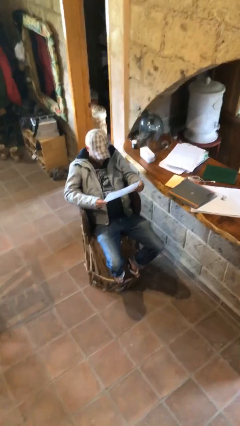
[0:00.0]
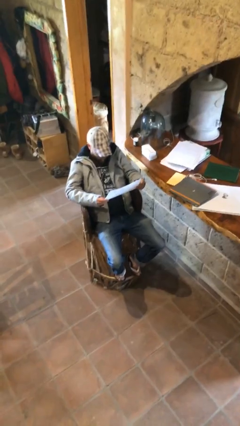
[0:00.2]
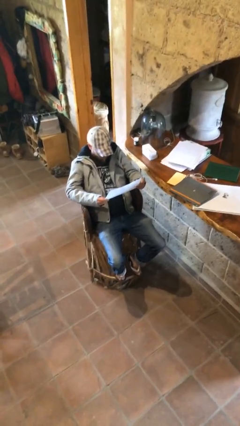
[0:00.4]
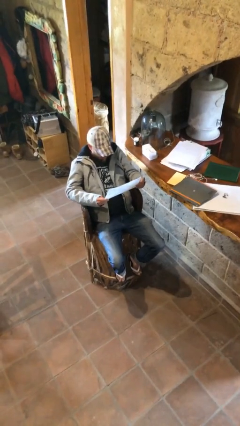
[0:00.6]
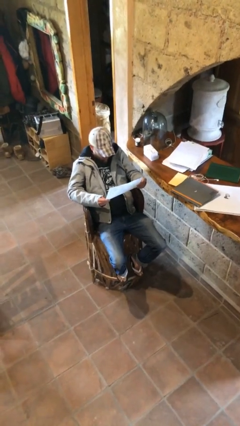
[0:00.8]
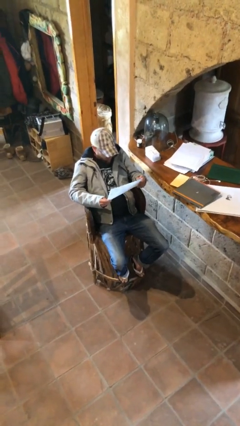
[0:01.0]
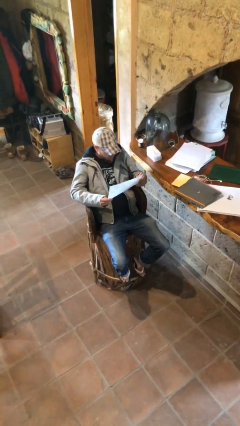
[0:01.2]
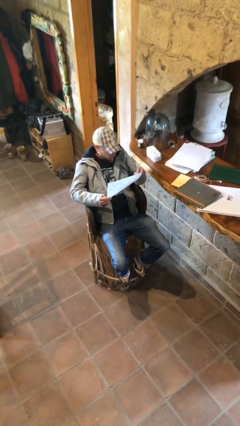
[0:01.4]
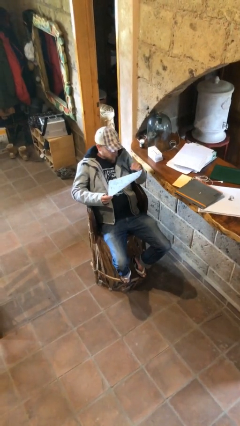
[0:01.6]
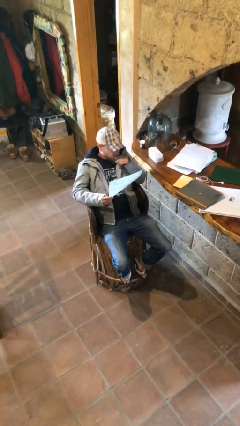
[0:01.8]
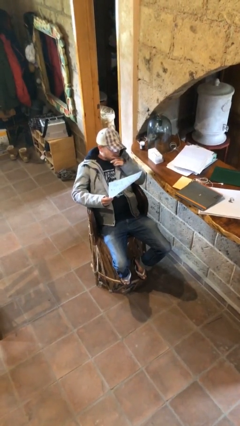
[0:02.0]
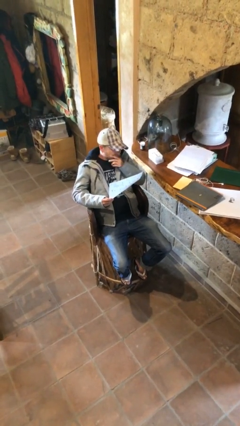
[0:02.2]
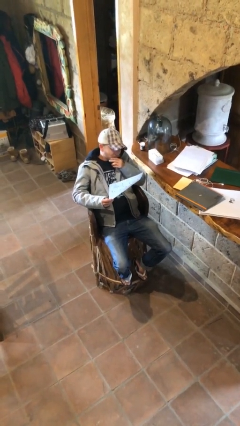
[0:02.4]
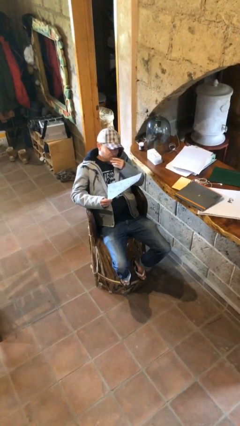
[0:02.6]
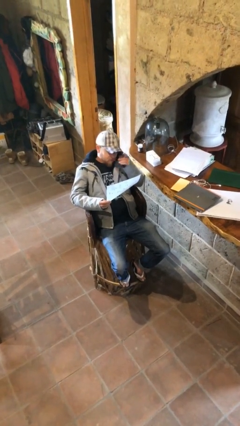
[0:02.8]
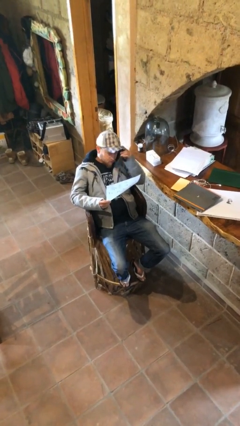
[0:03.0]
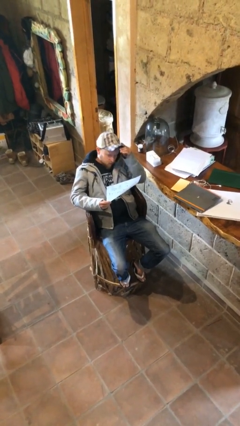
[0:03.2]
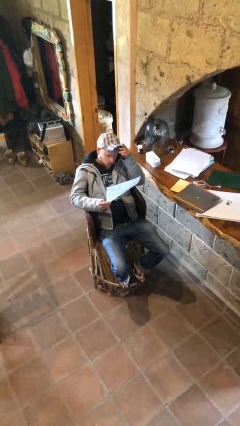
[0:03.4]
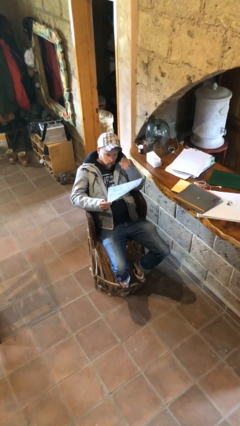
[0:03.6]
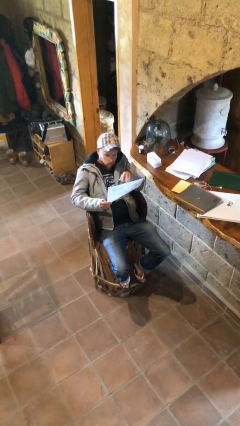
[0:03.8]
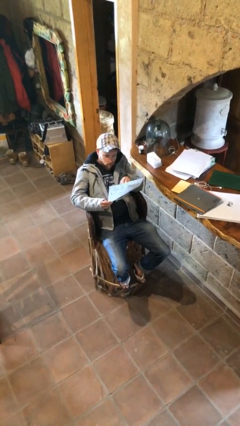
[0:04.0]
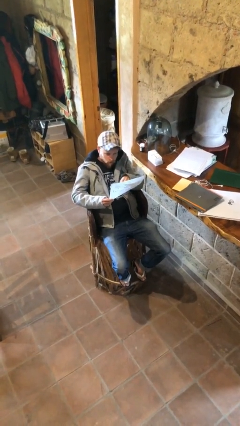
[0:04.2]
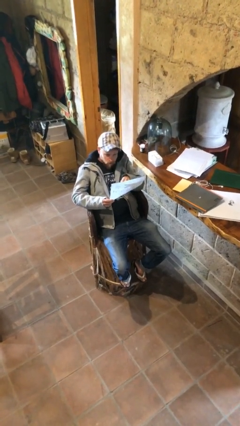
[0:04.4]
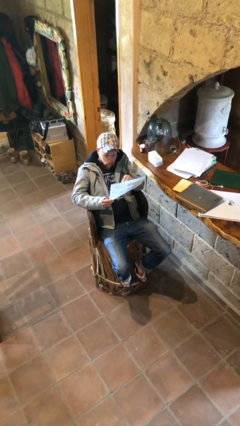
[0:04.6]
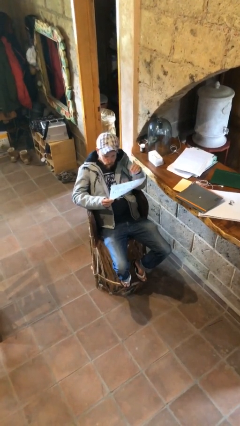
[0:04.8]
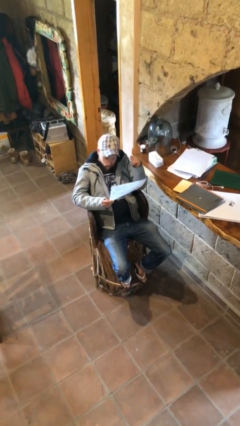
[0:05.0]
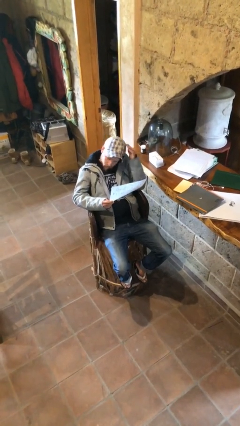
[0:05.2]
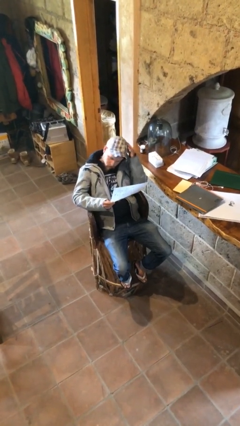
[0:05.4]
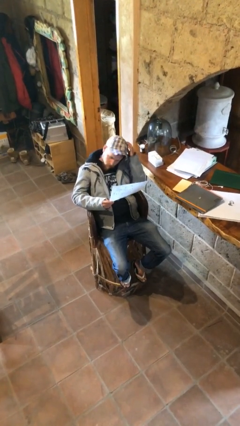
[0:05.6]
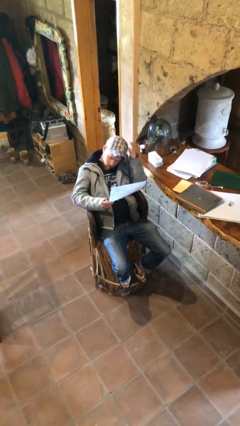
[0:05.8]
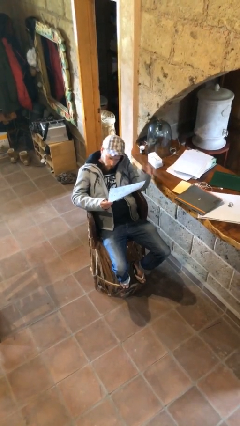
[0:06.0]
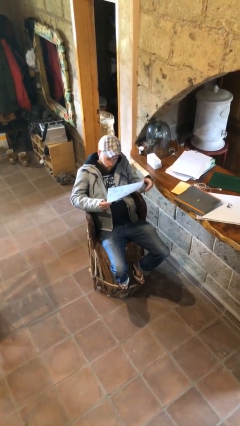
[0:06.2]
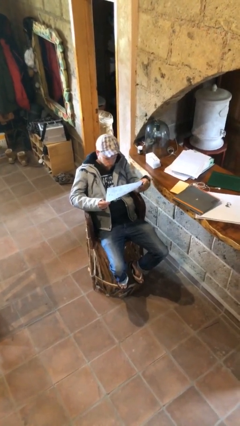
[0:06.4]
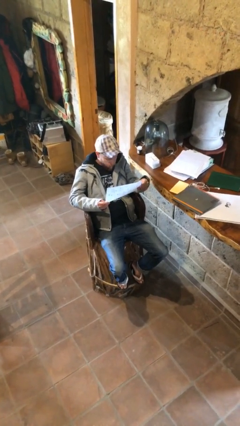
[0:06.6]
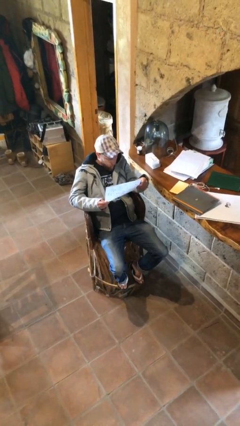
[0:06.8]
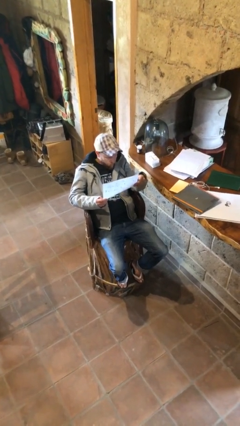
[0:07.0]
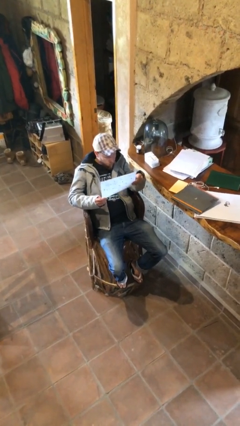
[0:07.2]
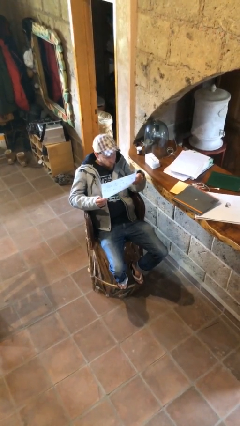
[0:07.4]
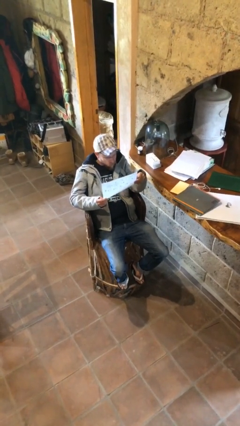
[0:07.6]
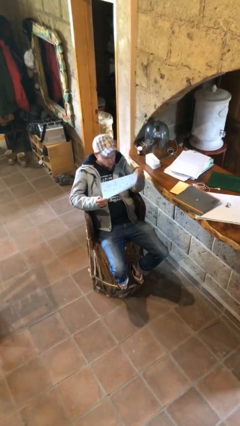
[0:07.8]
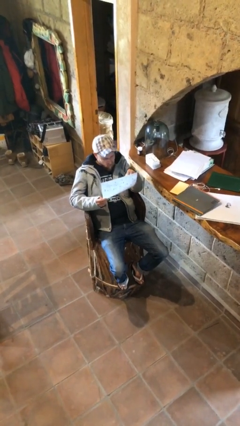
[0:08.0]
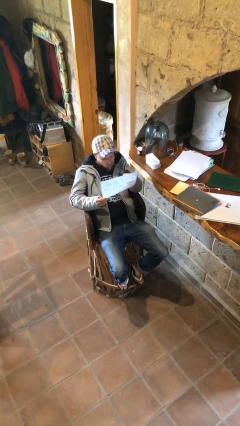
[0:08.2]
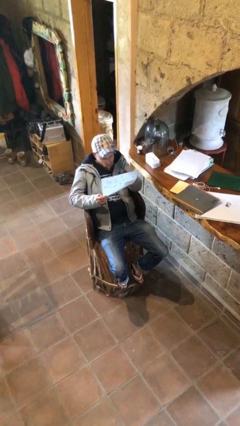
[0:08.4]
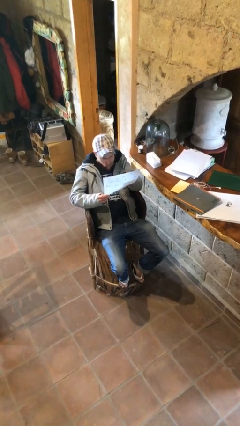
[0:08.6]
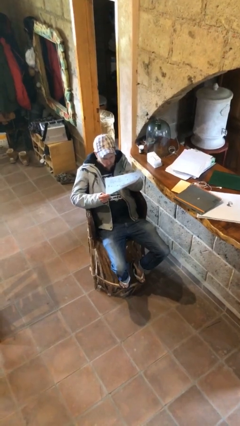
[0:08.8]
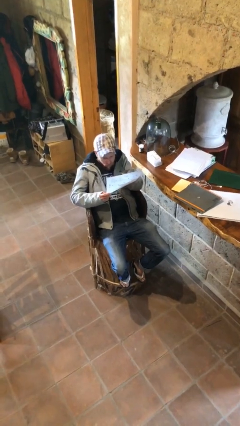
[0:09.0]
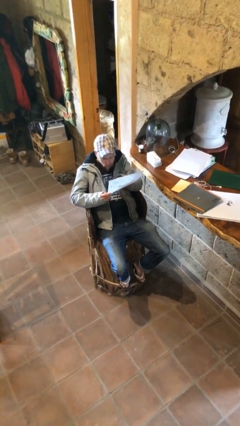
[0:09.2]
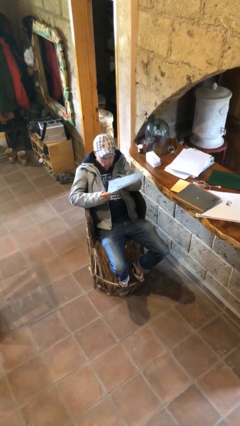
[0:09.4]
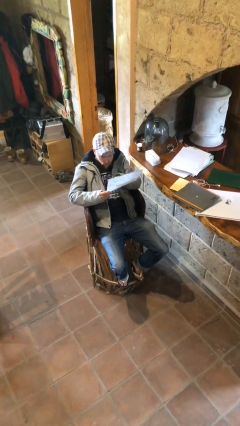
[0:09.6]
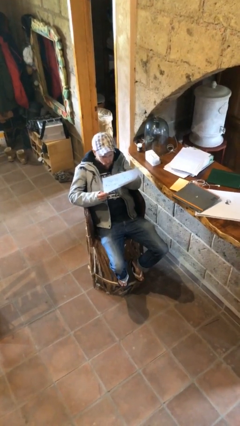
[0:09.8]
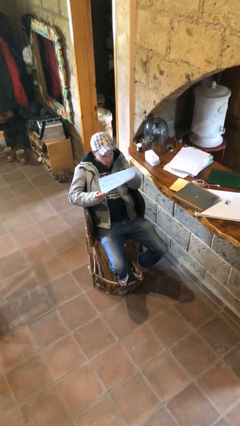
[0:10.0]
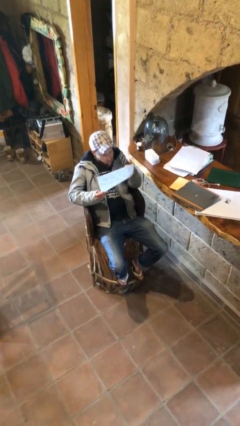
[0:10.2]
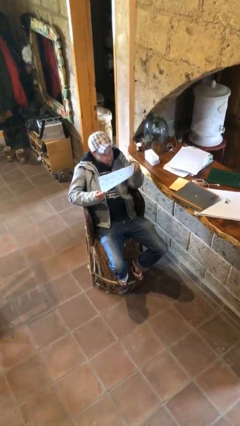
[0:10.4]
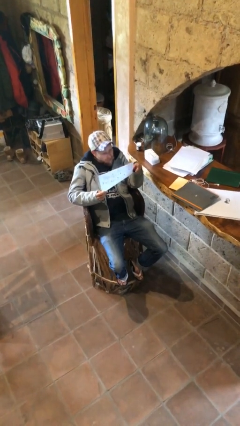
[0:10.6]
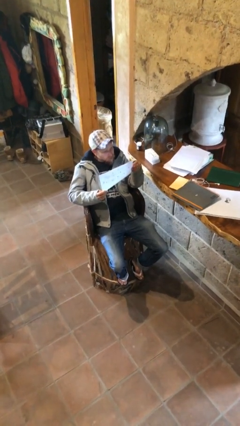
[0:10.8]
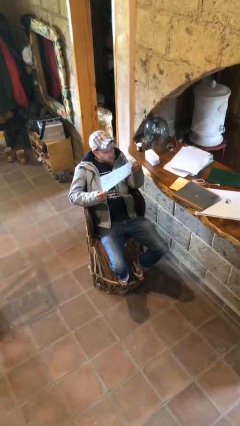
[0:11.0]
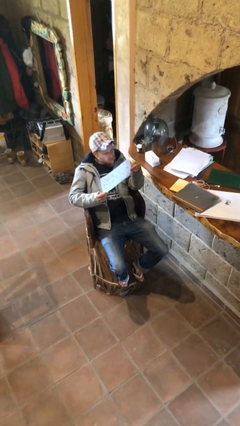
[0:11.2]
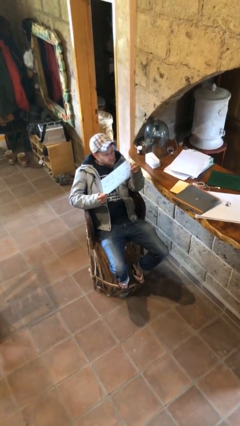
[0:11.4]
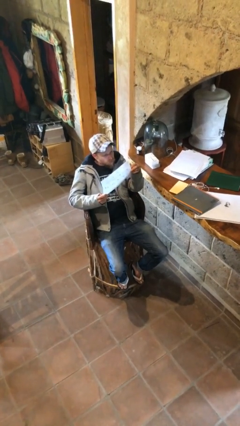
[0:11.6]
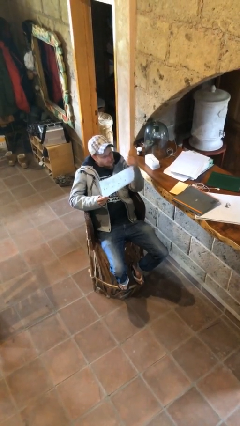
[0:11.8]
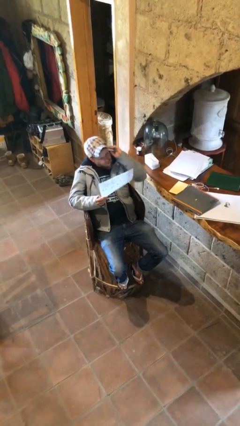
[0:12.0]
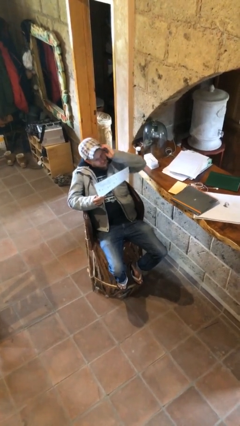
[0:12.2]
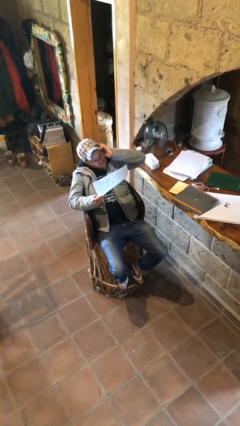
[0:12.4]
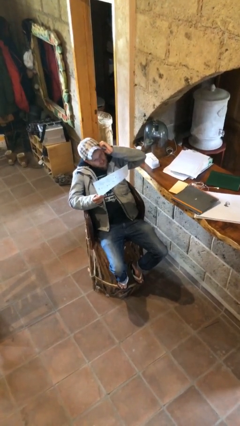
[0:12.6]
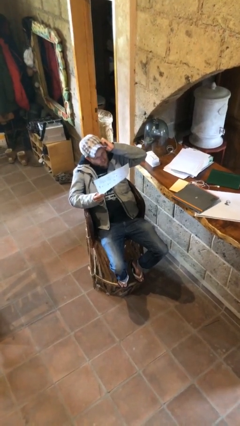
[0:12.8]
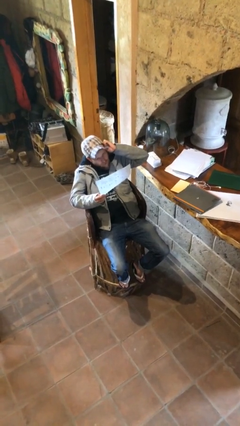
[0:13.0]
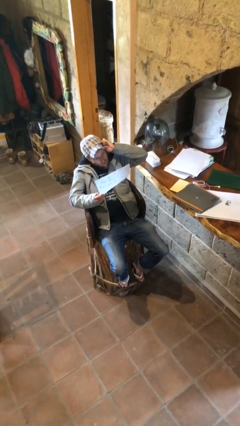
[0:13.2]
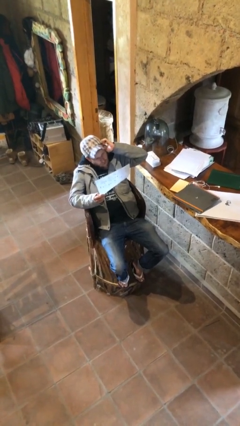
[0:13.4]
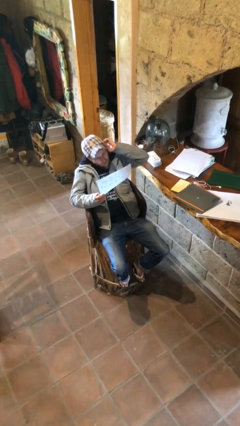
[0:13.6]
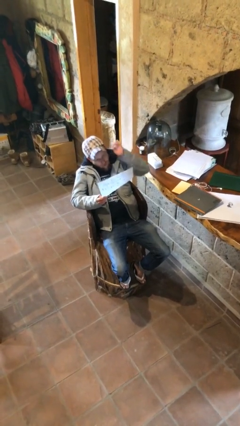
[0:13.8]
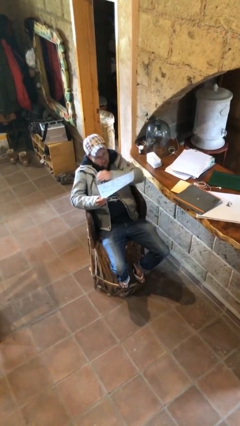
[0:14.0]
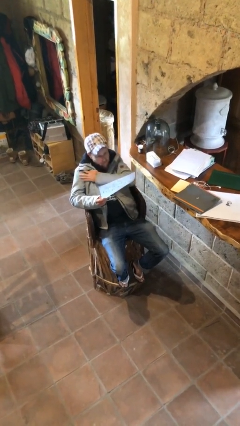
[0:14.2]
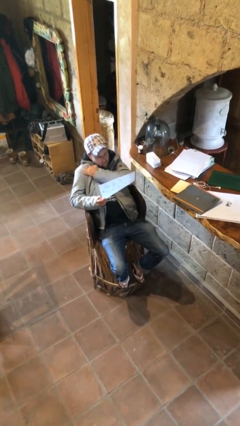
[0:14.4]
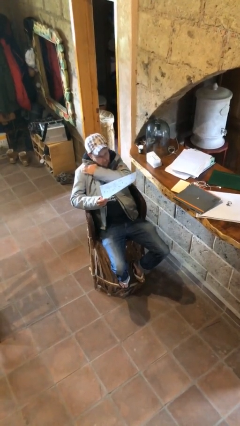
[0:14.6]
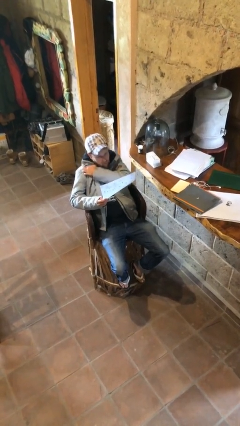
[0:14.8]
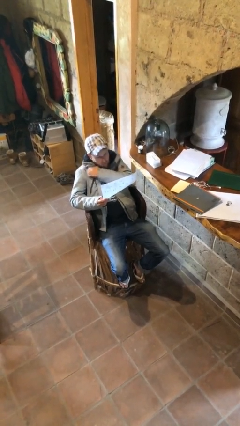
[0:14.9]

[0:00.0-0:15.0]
person reads document

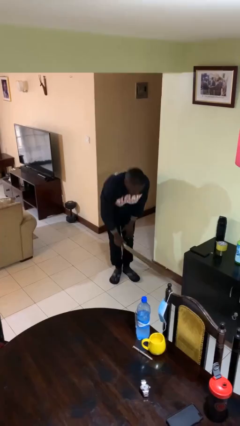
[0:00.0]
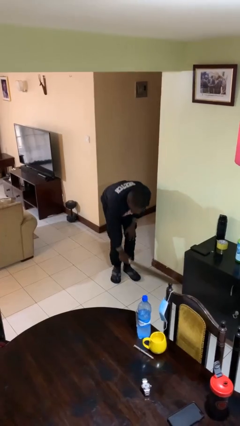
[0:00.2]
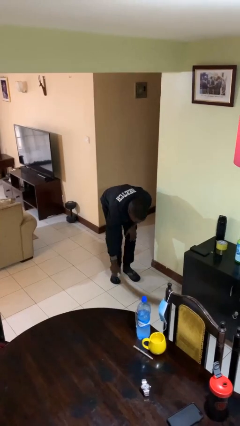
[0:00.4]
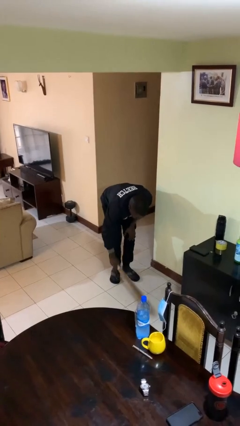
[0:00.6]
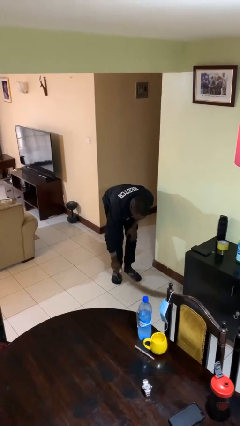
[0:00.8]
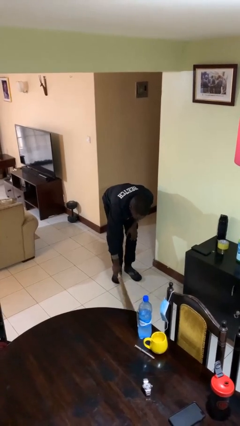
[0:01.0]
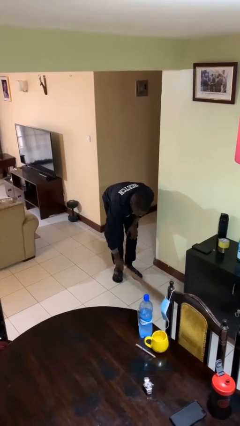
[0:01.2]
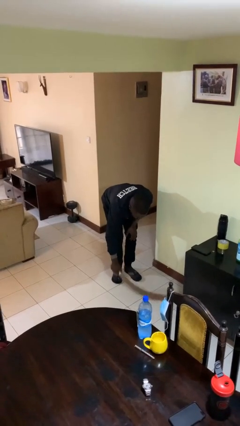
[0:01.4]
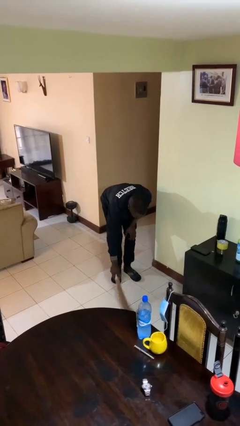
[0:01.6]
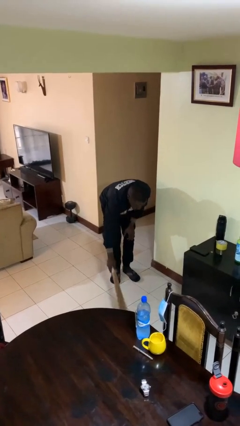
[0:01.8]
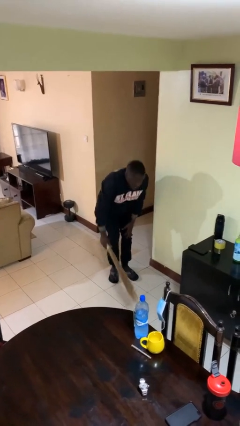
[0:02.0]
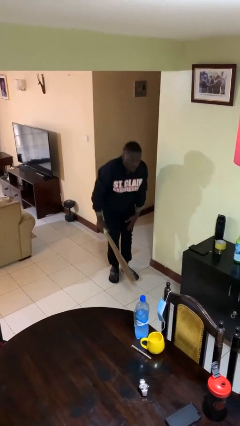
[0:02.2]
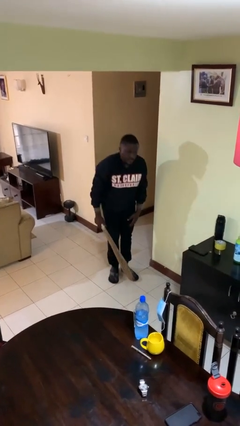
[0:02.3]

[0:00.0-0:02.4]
person sweeps floor

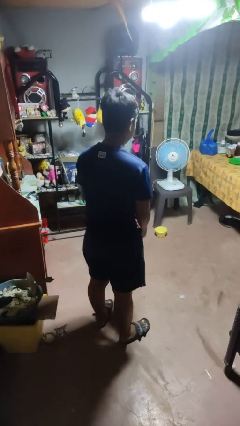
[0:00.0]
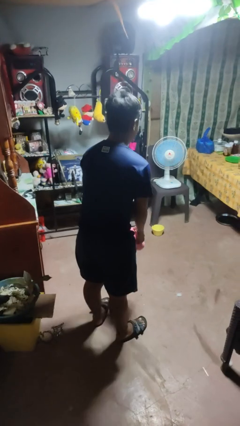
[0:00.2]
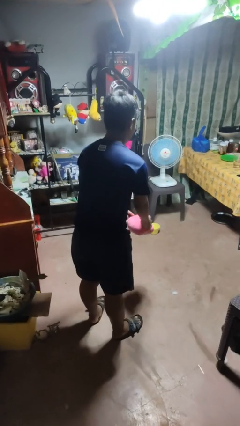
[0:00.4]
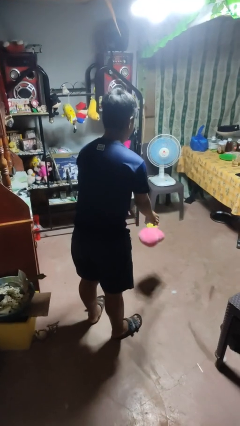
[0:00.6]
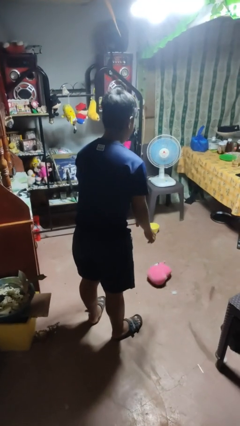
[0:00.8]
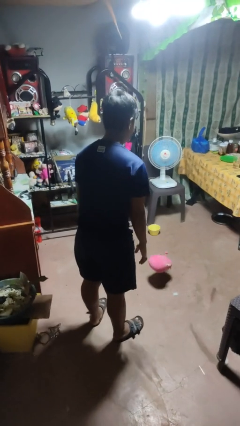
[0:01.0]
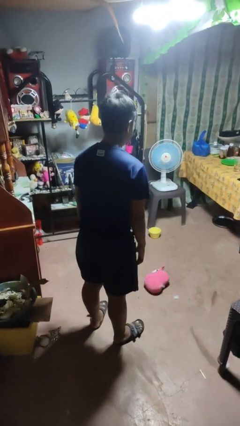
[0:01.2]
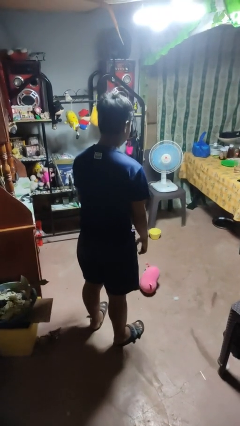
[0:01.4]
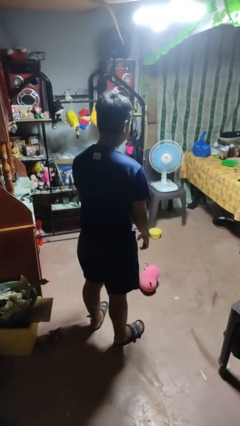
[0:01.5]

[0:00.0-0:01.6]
person throws object into air
